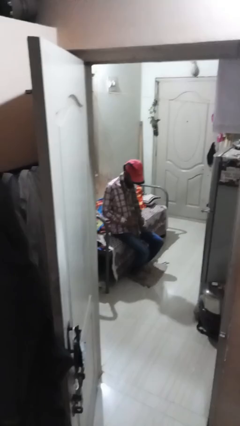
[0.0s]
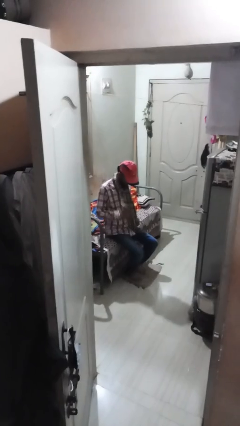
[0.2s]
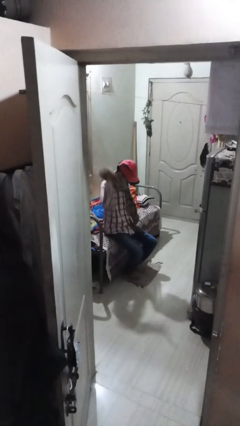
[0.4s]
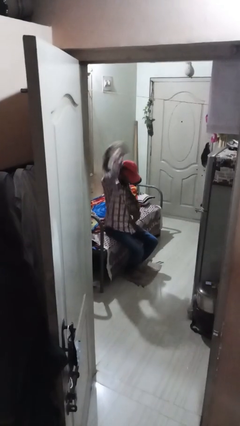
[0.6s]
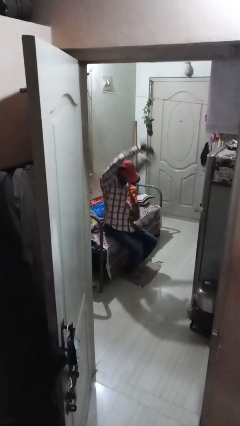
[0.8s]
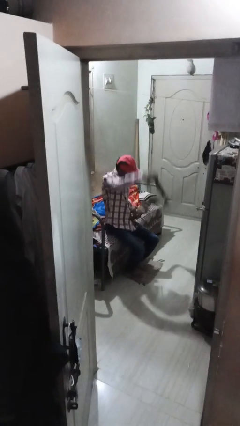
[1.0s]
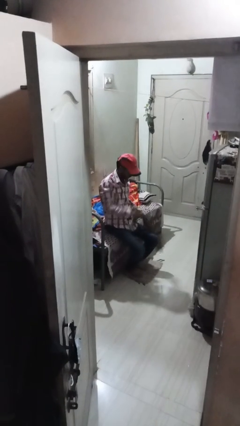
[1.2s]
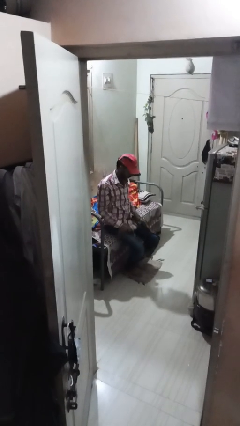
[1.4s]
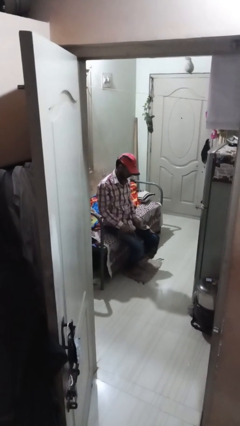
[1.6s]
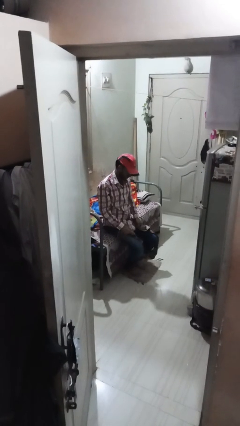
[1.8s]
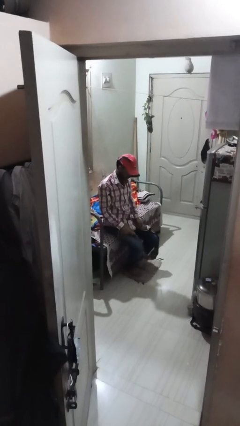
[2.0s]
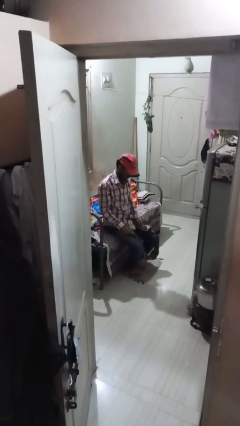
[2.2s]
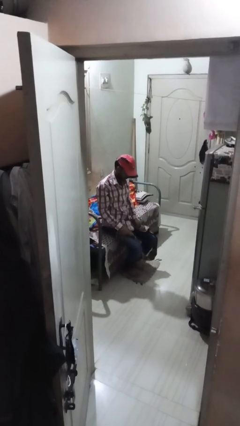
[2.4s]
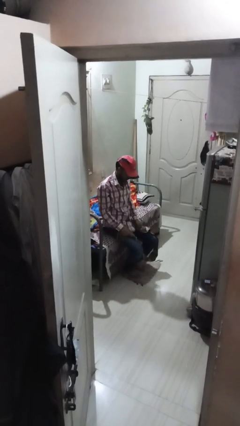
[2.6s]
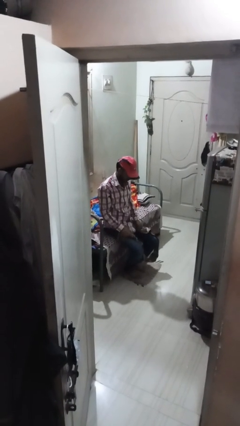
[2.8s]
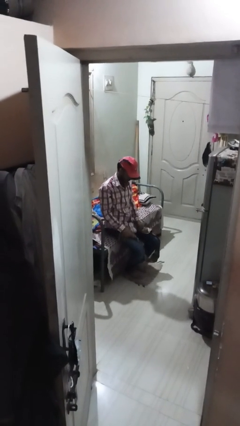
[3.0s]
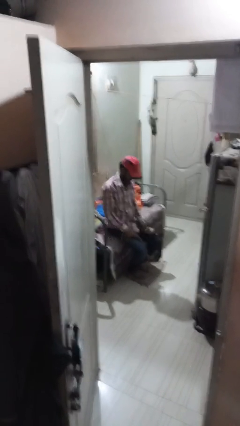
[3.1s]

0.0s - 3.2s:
person takes off scarf

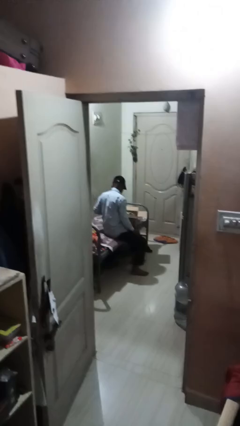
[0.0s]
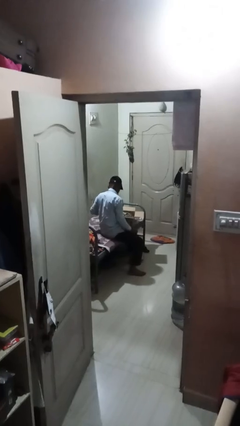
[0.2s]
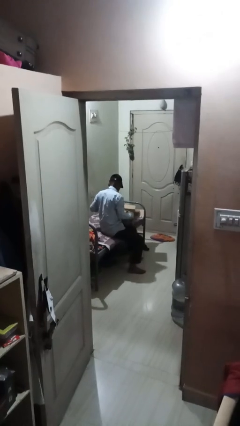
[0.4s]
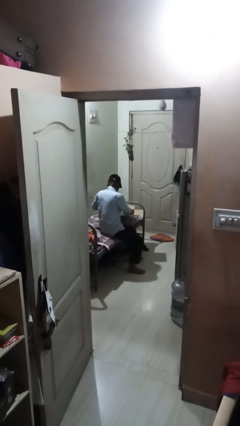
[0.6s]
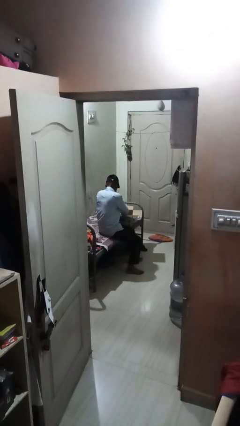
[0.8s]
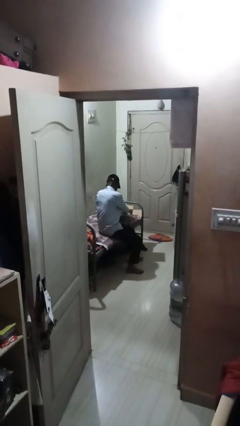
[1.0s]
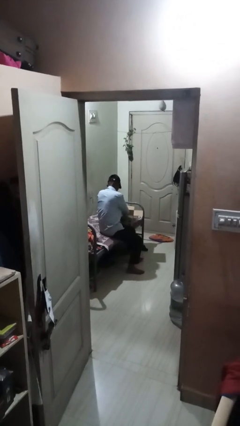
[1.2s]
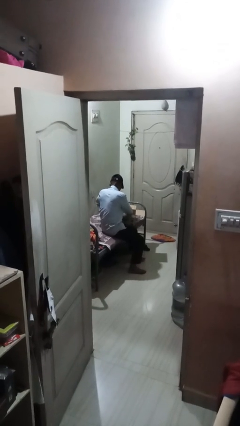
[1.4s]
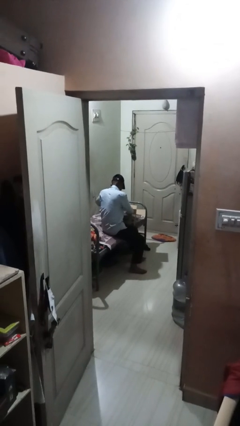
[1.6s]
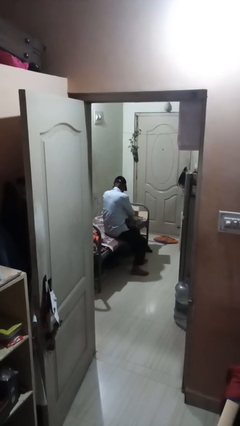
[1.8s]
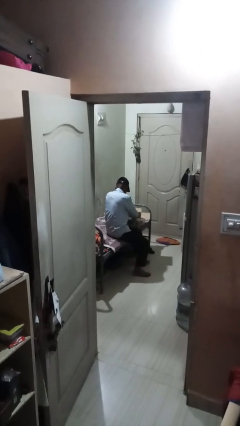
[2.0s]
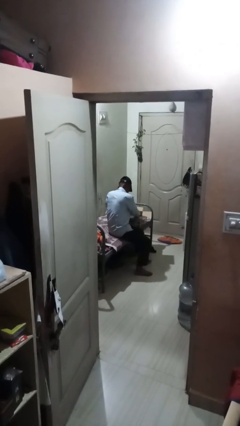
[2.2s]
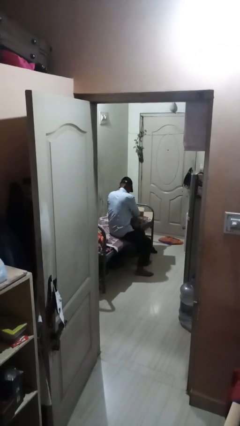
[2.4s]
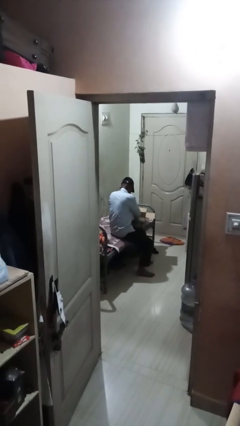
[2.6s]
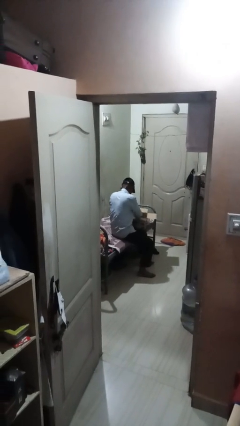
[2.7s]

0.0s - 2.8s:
person searches in box

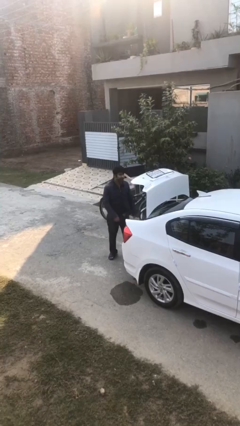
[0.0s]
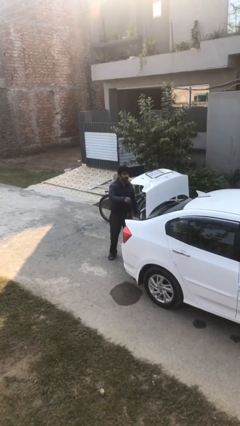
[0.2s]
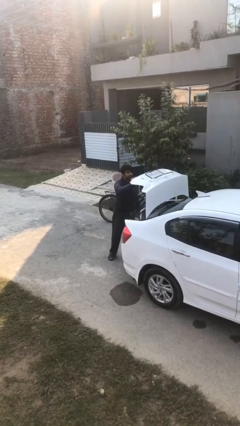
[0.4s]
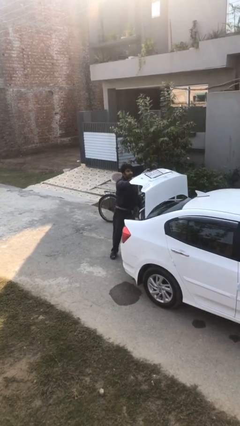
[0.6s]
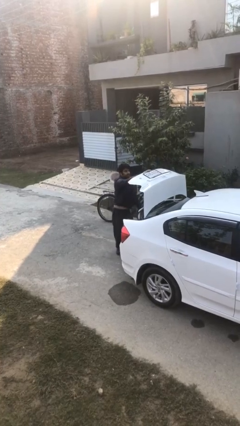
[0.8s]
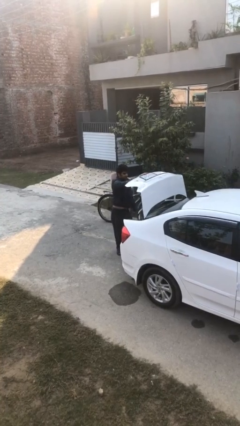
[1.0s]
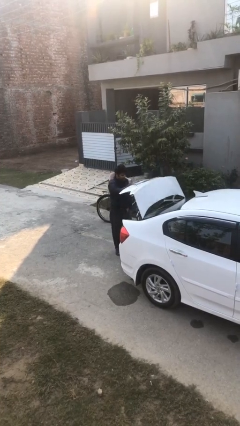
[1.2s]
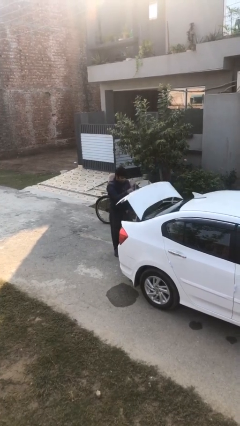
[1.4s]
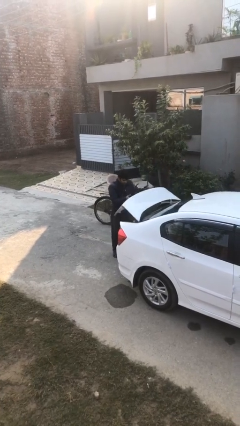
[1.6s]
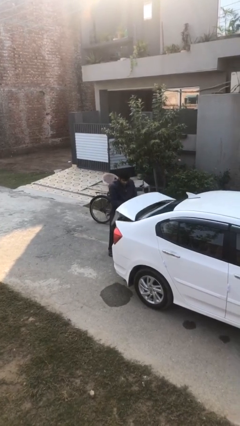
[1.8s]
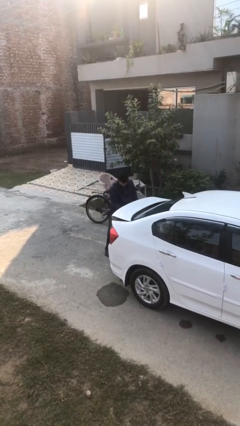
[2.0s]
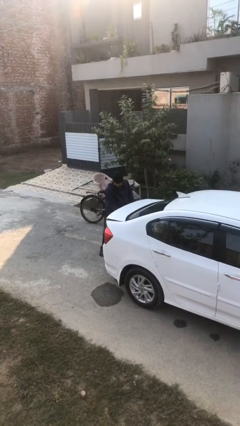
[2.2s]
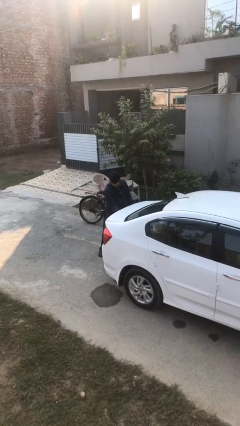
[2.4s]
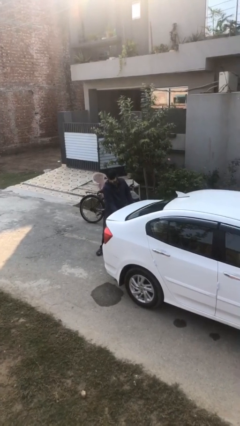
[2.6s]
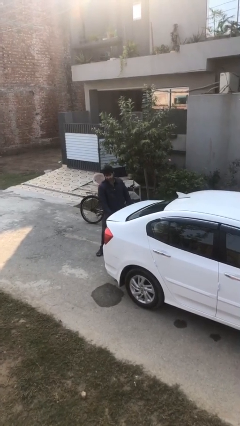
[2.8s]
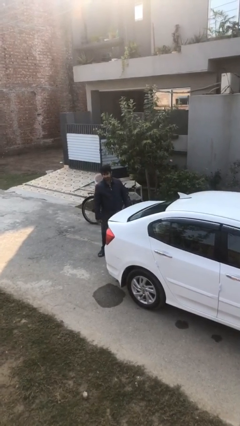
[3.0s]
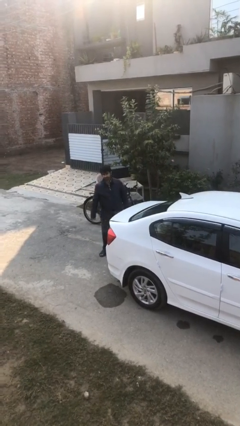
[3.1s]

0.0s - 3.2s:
person closes car trunk

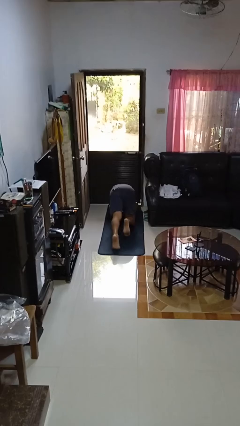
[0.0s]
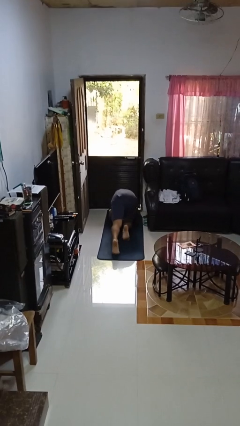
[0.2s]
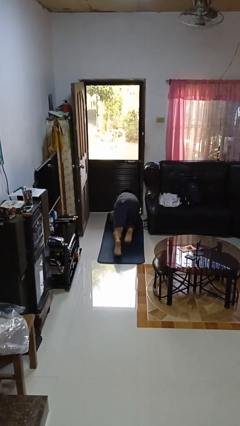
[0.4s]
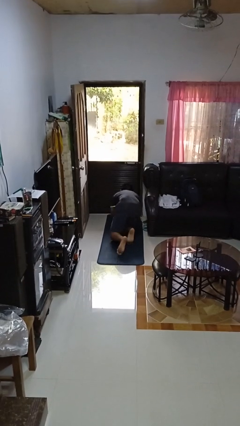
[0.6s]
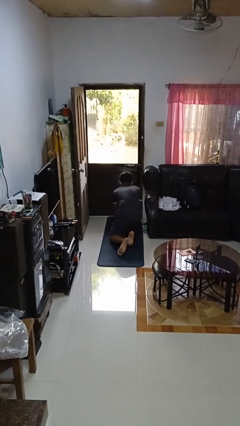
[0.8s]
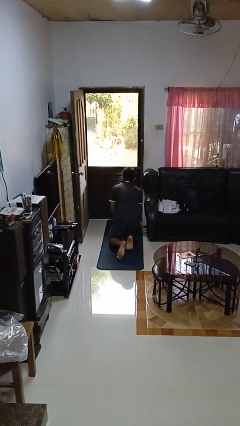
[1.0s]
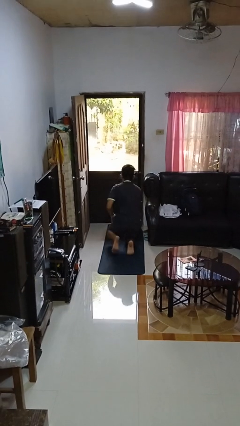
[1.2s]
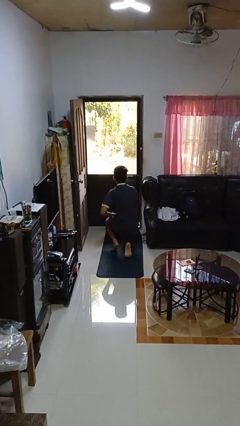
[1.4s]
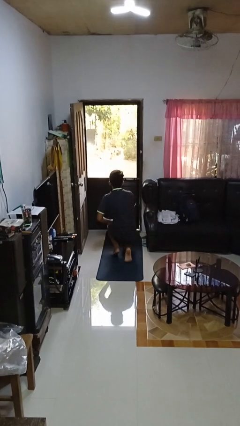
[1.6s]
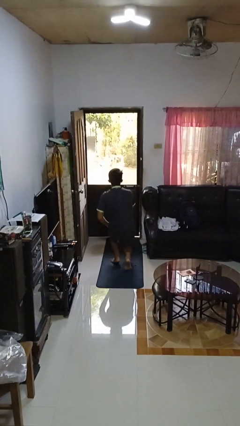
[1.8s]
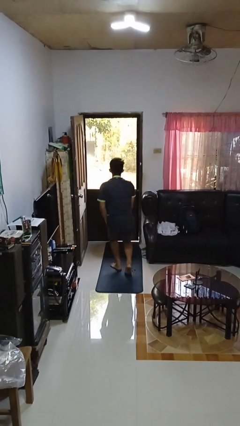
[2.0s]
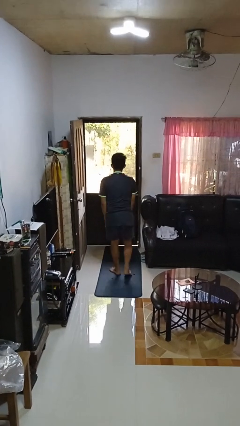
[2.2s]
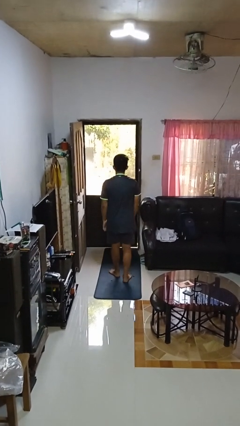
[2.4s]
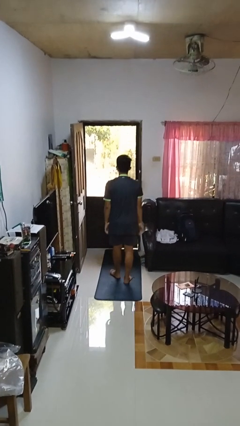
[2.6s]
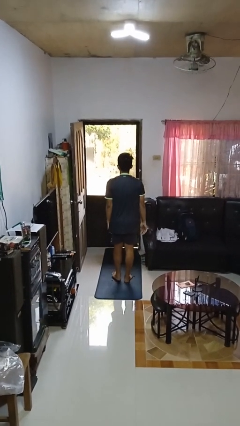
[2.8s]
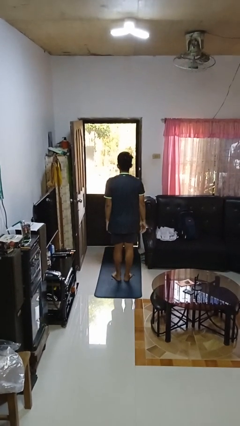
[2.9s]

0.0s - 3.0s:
person stands up from floor

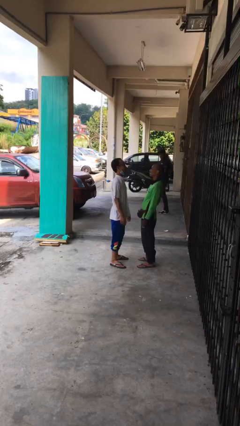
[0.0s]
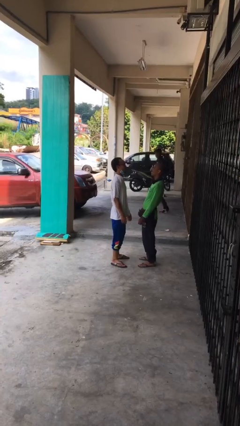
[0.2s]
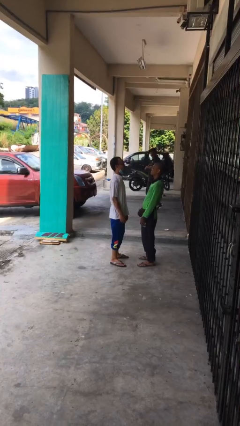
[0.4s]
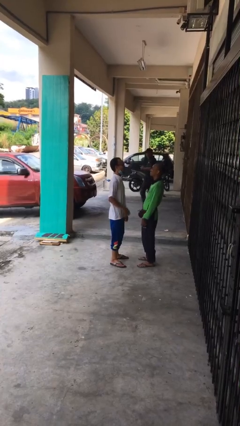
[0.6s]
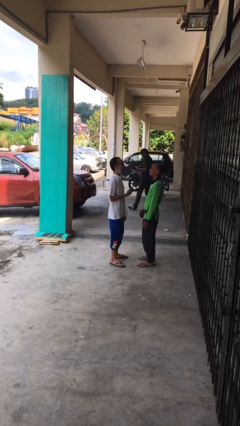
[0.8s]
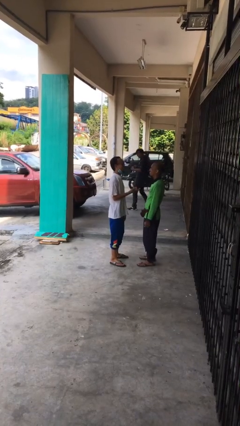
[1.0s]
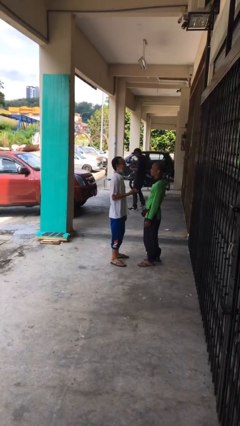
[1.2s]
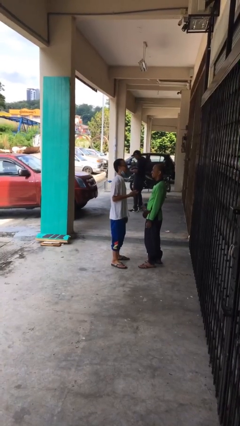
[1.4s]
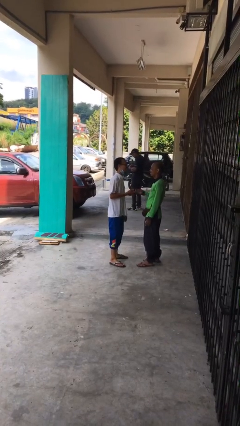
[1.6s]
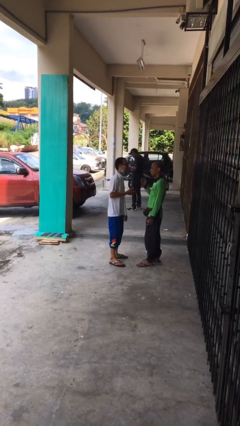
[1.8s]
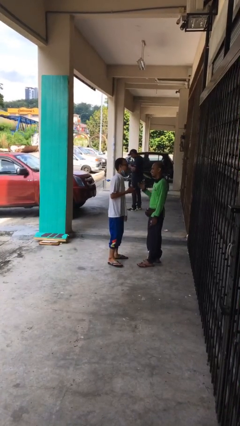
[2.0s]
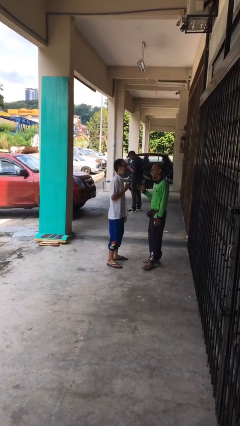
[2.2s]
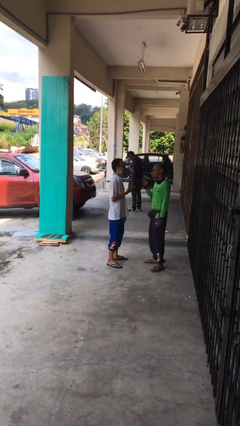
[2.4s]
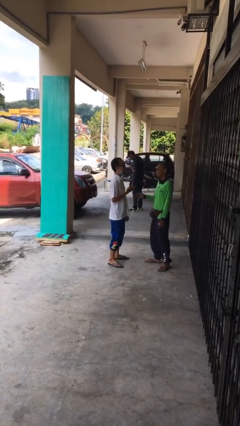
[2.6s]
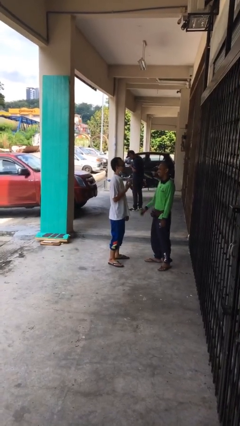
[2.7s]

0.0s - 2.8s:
person talks to person

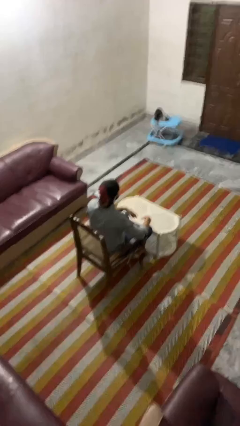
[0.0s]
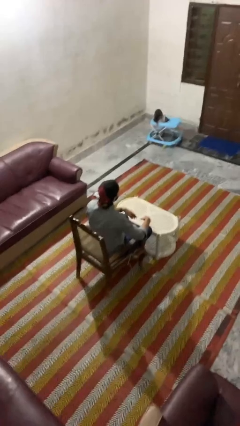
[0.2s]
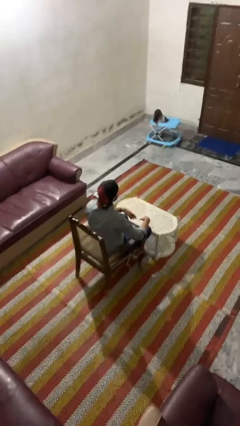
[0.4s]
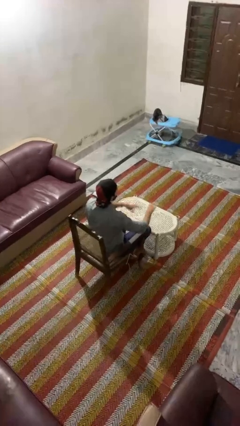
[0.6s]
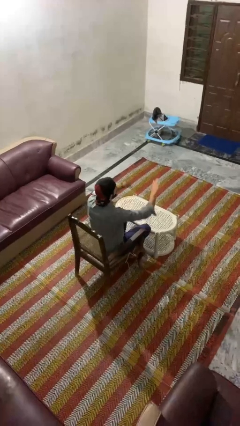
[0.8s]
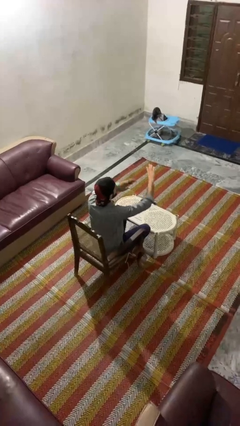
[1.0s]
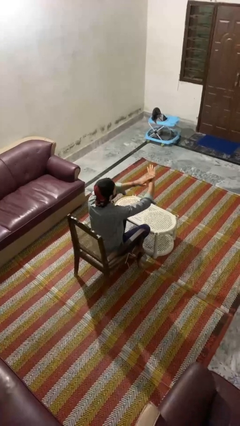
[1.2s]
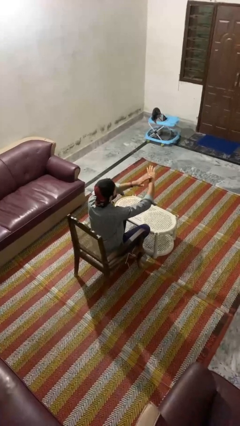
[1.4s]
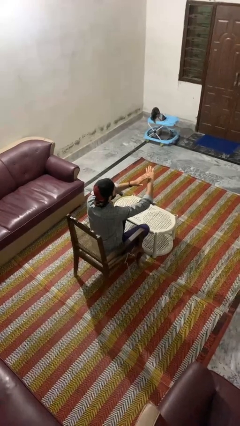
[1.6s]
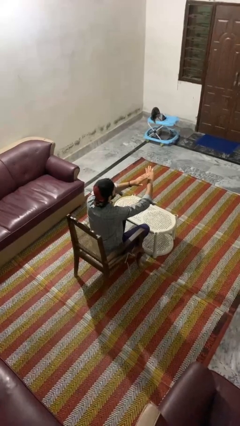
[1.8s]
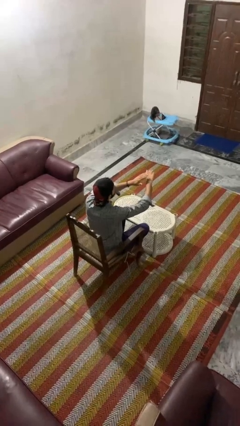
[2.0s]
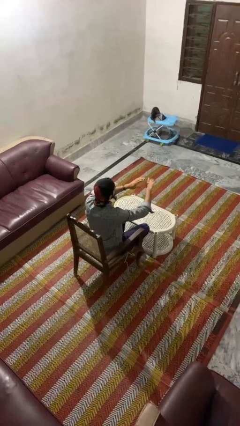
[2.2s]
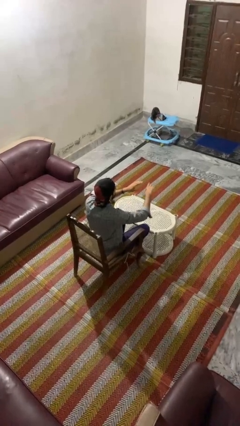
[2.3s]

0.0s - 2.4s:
person swats bug

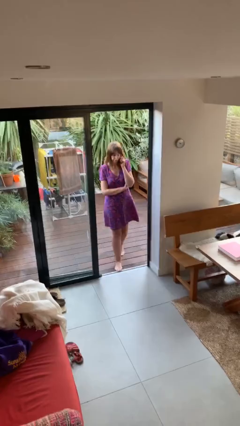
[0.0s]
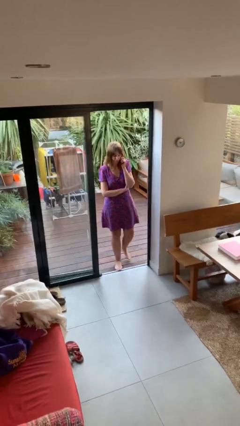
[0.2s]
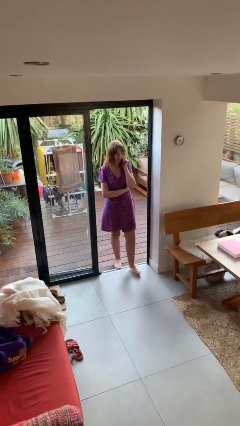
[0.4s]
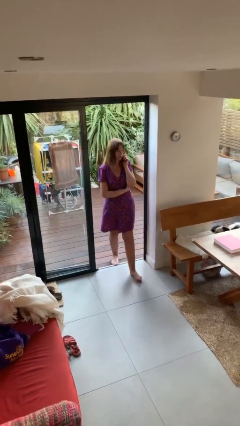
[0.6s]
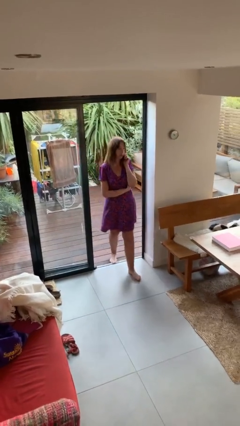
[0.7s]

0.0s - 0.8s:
person enters scene through structure
